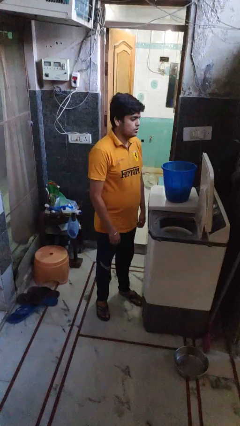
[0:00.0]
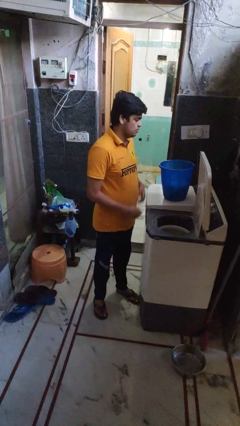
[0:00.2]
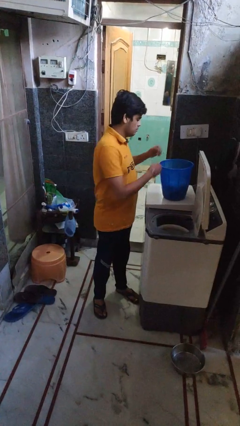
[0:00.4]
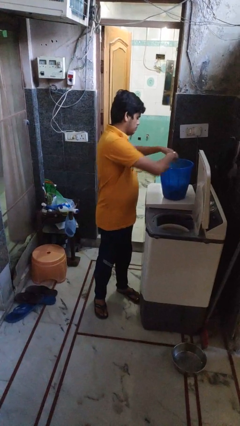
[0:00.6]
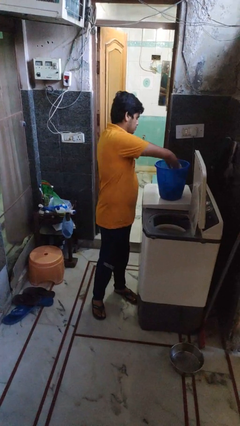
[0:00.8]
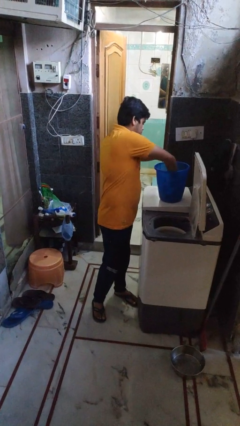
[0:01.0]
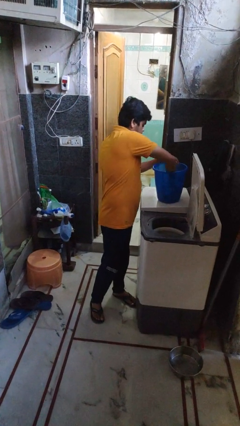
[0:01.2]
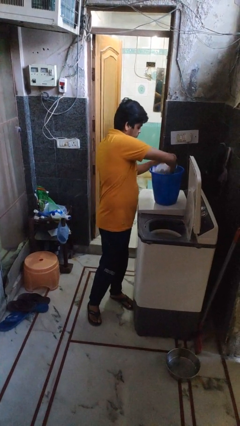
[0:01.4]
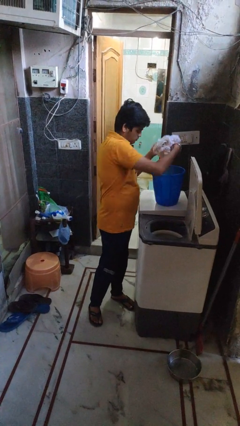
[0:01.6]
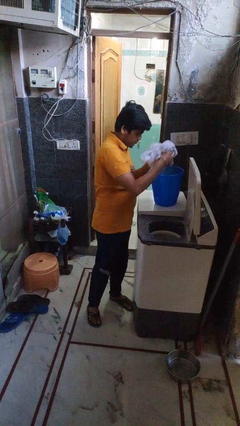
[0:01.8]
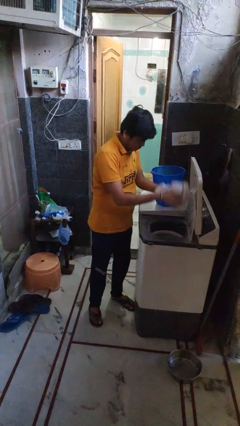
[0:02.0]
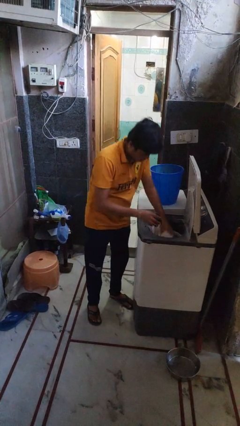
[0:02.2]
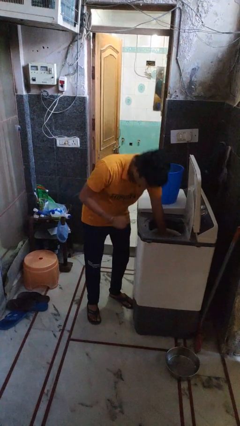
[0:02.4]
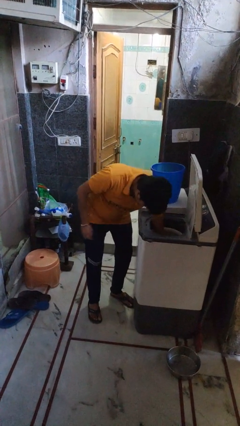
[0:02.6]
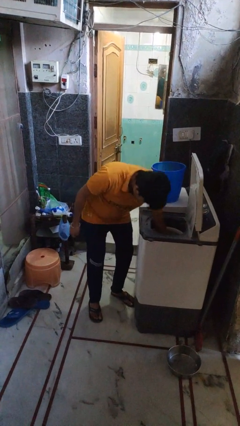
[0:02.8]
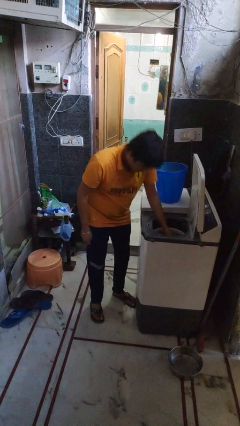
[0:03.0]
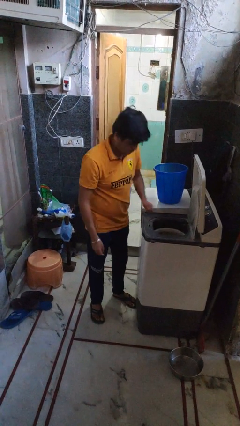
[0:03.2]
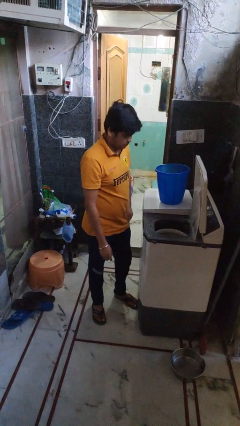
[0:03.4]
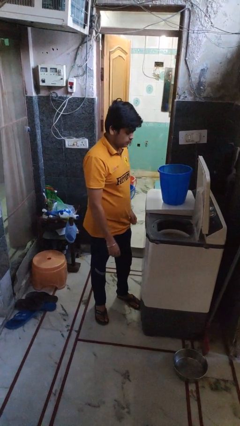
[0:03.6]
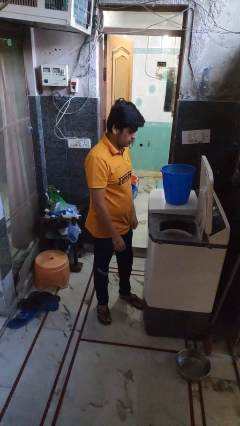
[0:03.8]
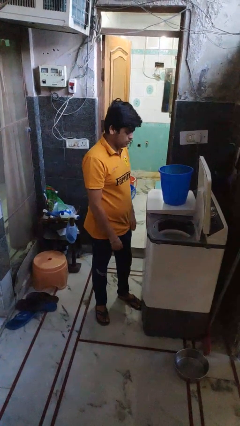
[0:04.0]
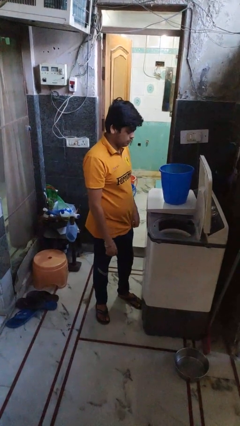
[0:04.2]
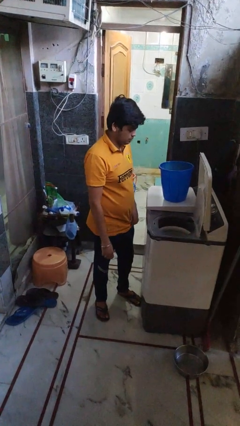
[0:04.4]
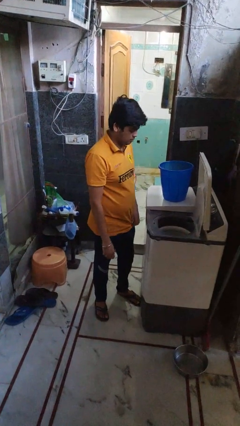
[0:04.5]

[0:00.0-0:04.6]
person loads clotheswasher

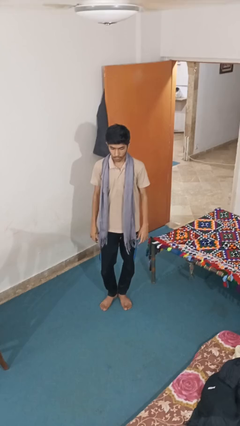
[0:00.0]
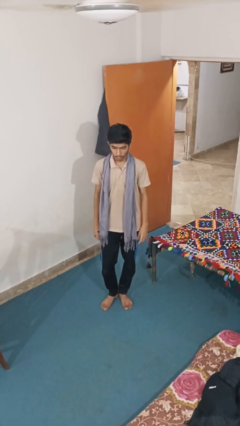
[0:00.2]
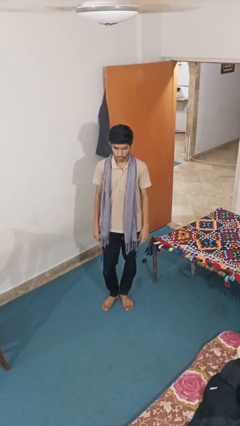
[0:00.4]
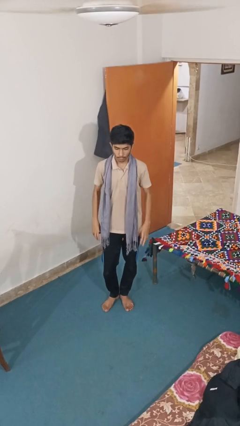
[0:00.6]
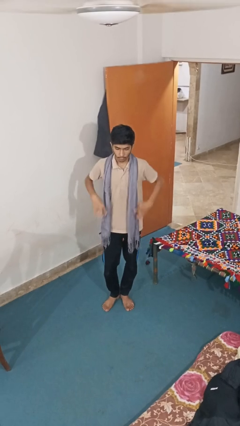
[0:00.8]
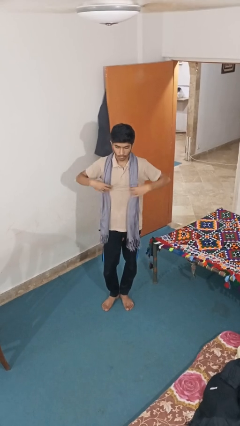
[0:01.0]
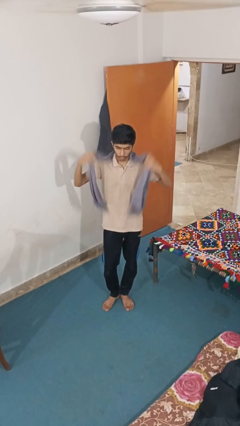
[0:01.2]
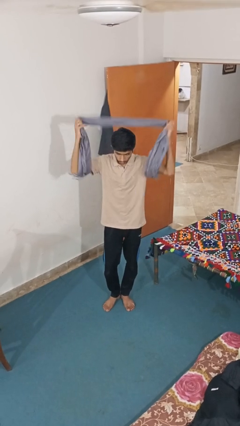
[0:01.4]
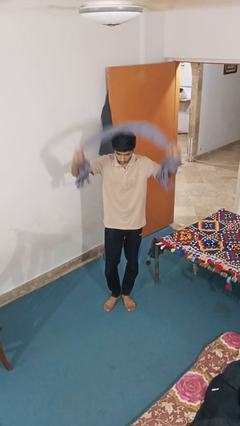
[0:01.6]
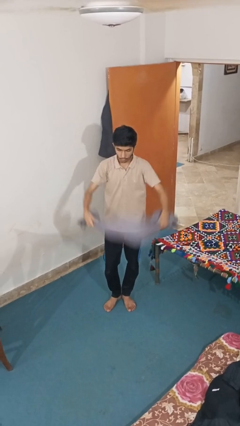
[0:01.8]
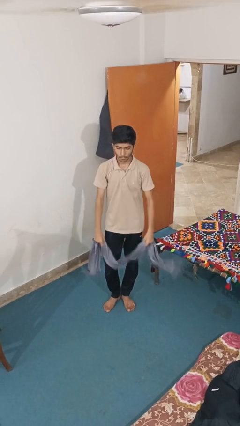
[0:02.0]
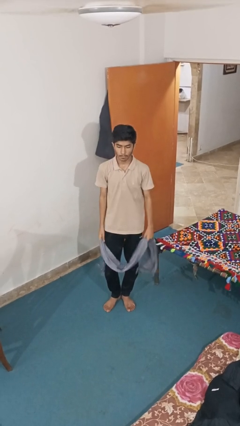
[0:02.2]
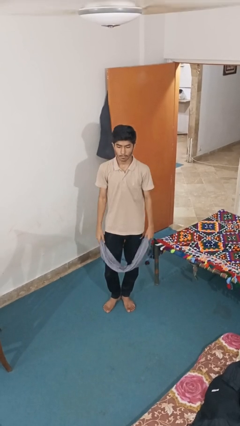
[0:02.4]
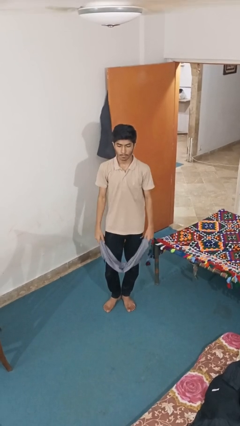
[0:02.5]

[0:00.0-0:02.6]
person takes off scarf

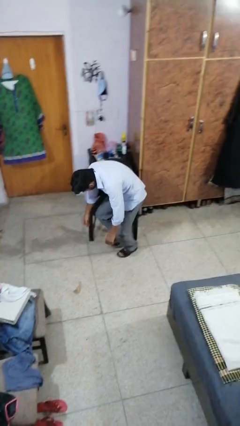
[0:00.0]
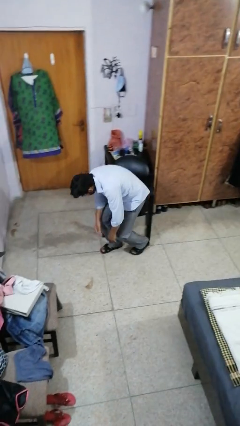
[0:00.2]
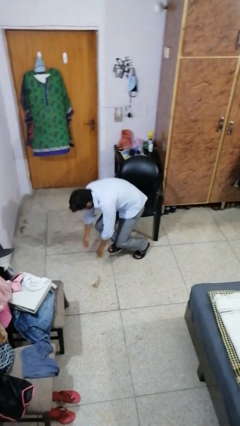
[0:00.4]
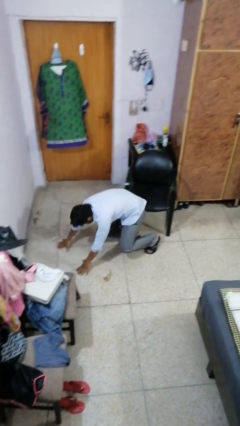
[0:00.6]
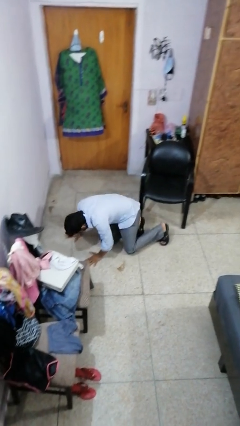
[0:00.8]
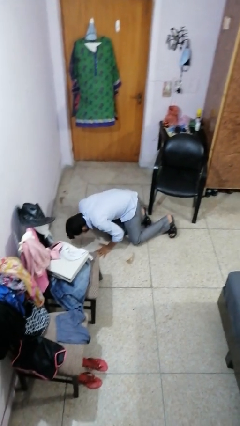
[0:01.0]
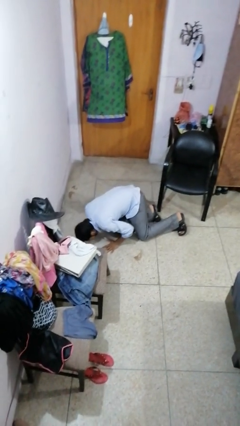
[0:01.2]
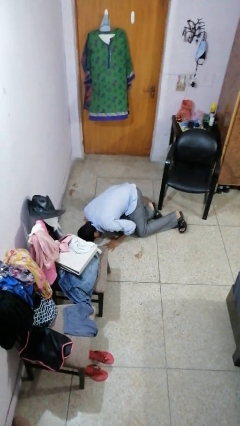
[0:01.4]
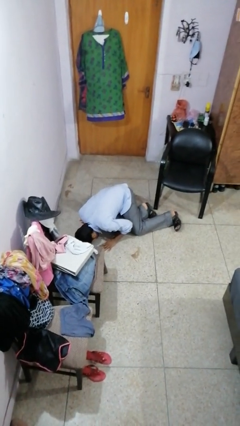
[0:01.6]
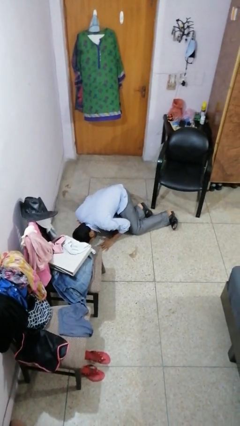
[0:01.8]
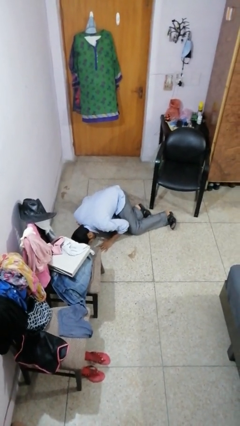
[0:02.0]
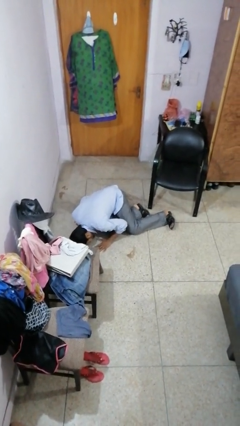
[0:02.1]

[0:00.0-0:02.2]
person lies down on floor

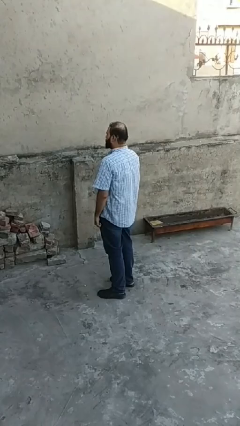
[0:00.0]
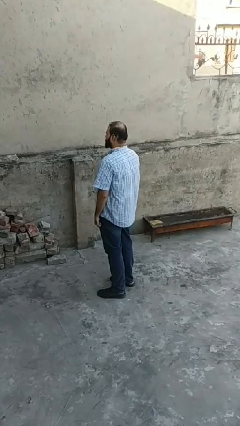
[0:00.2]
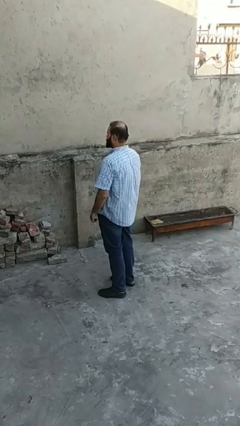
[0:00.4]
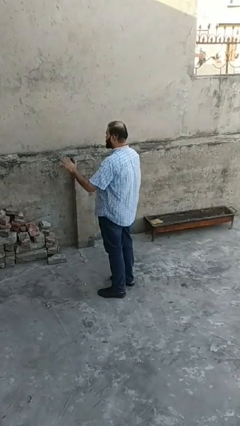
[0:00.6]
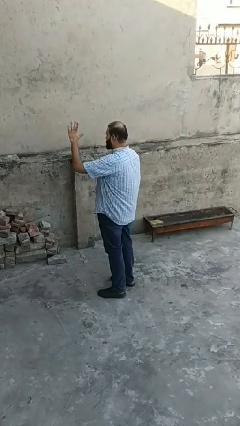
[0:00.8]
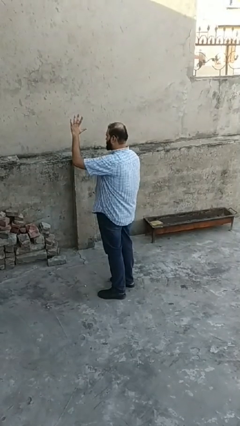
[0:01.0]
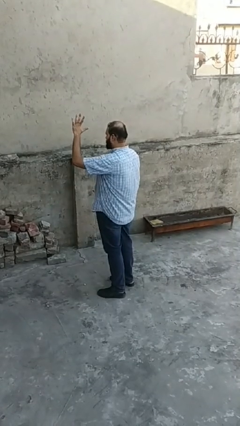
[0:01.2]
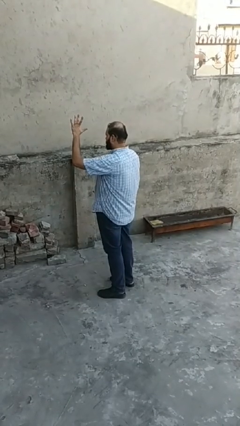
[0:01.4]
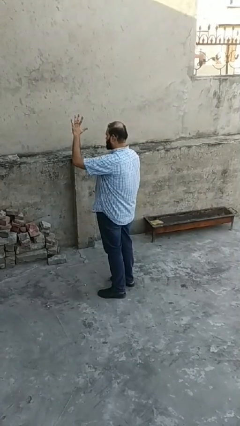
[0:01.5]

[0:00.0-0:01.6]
person gestures number five

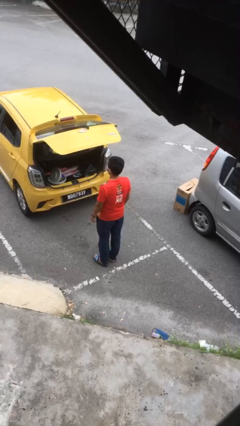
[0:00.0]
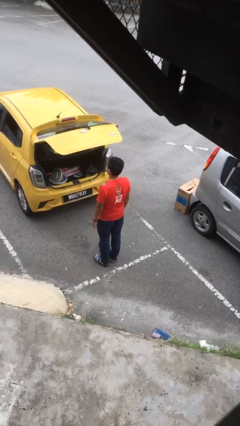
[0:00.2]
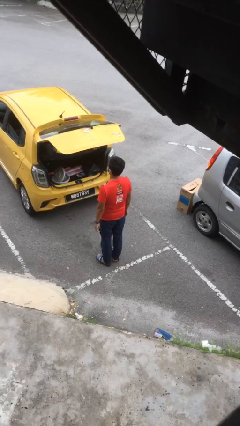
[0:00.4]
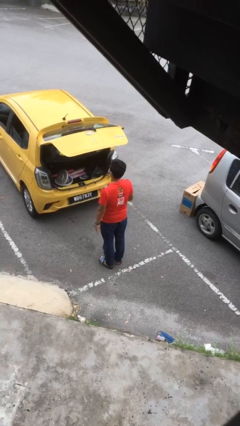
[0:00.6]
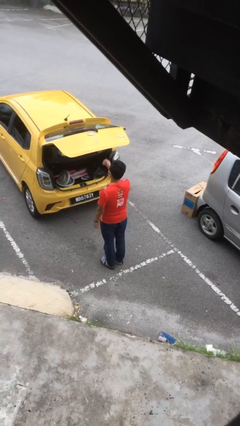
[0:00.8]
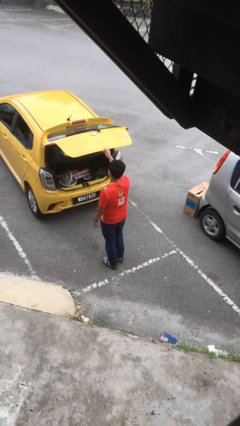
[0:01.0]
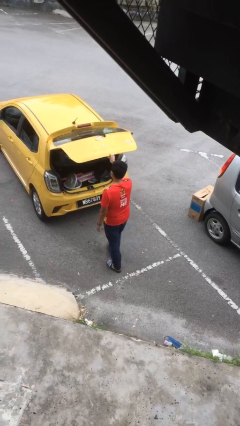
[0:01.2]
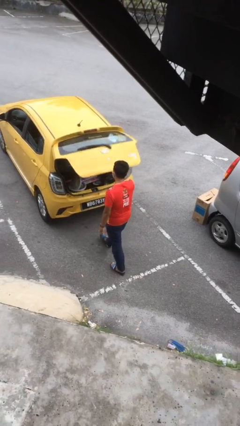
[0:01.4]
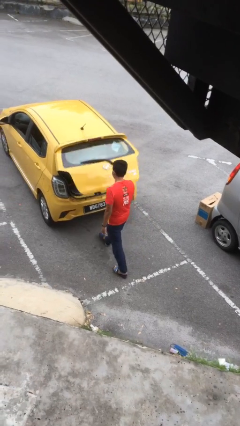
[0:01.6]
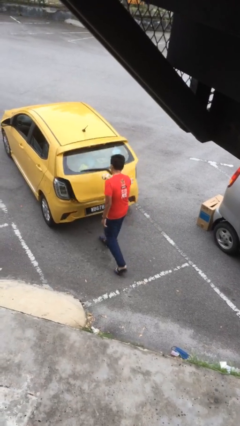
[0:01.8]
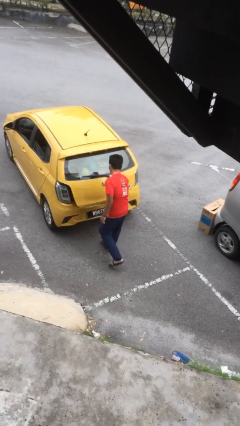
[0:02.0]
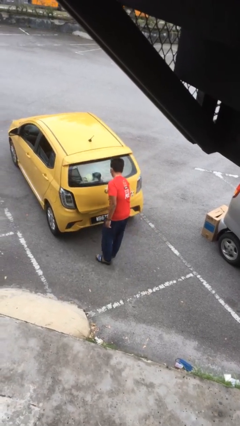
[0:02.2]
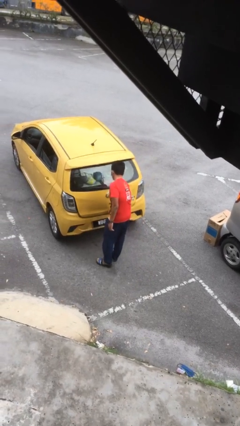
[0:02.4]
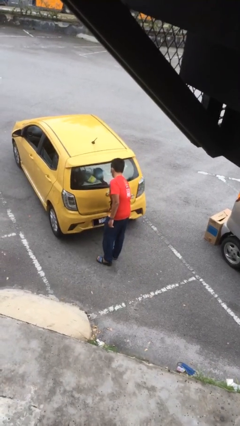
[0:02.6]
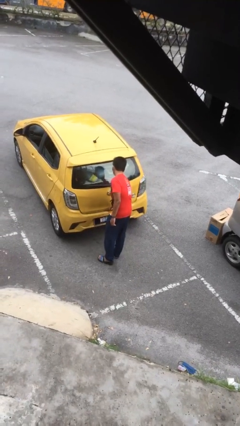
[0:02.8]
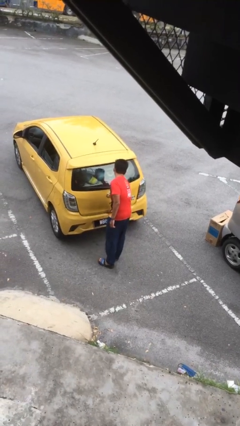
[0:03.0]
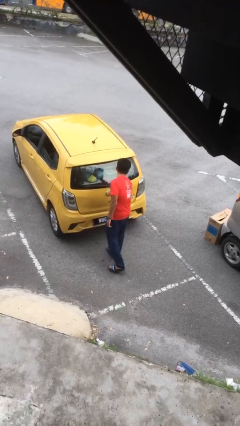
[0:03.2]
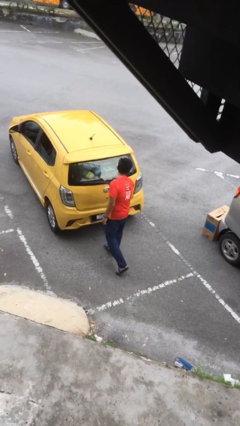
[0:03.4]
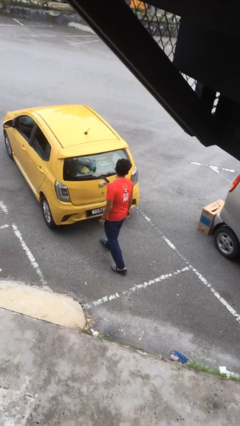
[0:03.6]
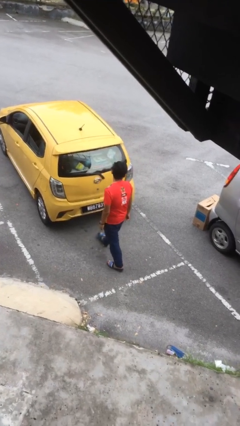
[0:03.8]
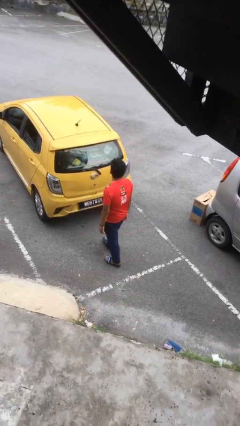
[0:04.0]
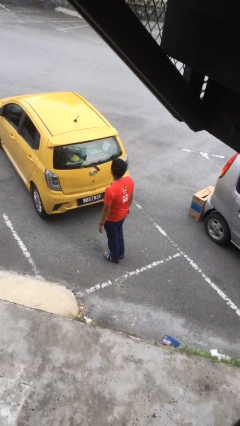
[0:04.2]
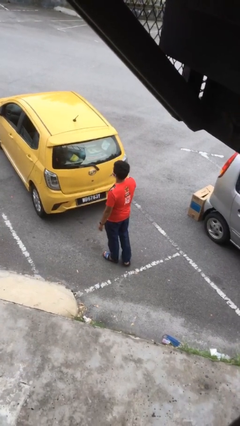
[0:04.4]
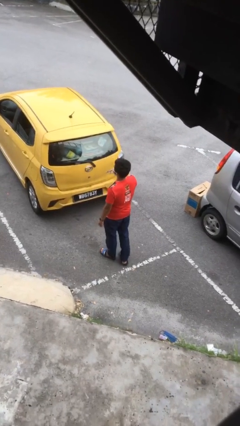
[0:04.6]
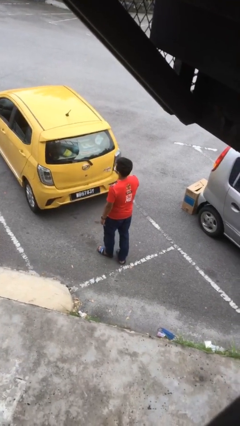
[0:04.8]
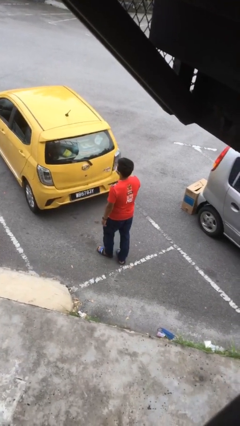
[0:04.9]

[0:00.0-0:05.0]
person closes car trunk

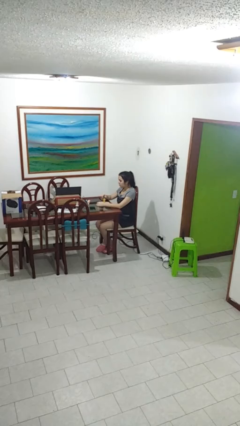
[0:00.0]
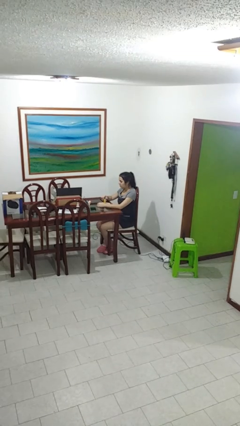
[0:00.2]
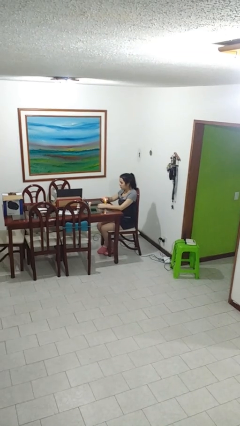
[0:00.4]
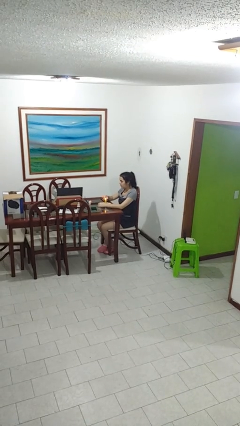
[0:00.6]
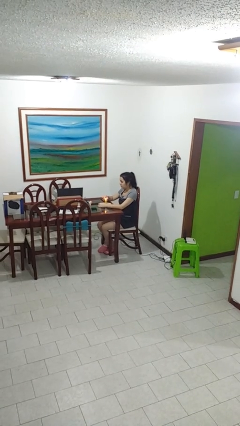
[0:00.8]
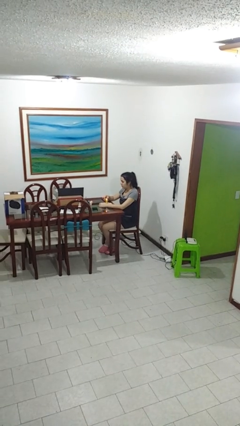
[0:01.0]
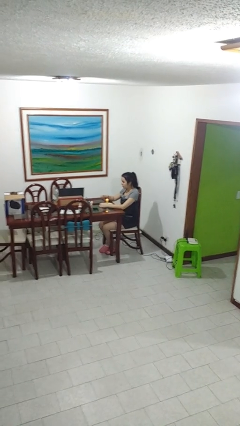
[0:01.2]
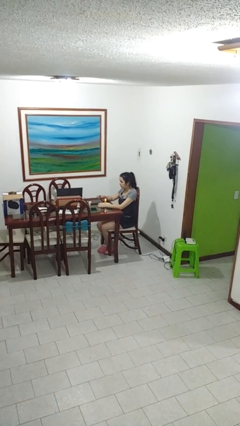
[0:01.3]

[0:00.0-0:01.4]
person lights candle
